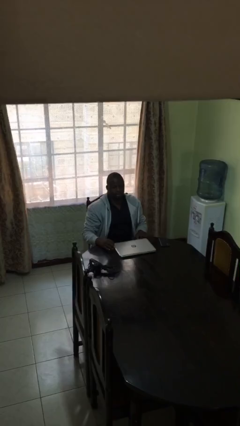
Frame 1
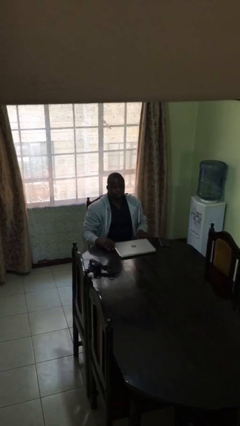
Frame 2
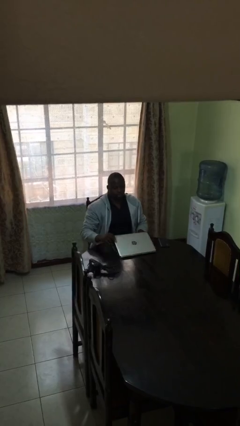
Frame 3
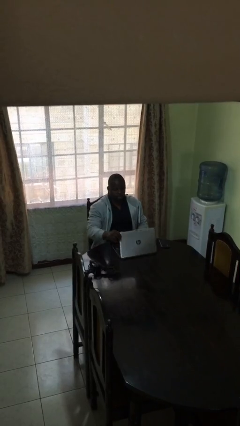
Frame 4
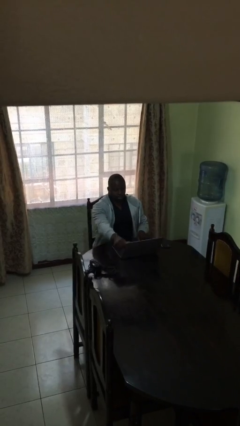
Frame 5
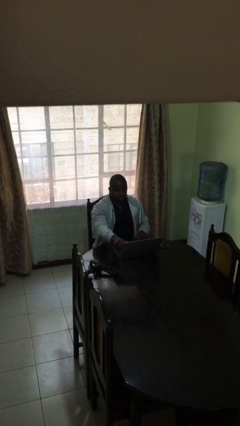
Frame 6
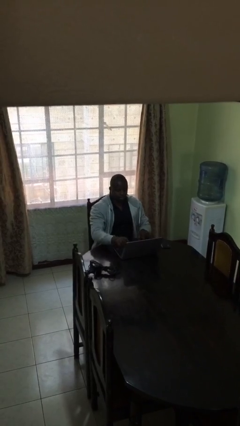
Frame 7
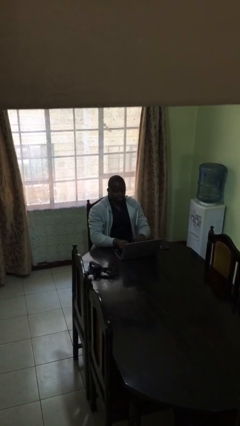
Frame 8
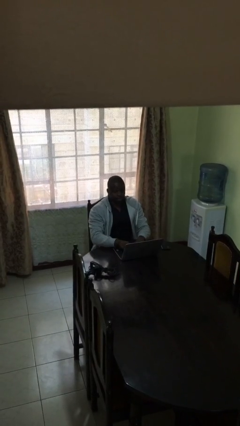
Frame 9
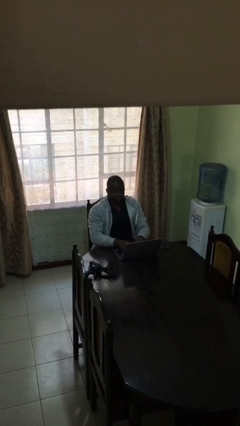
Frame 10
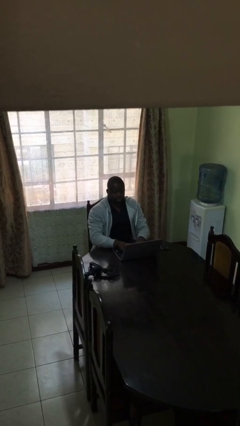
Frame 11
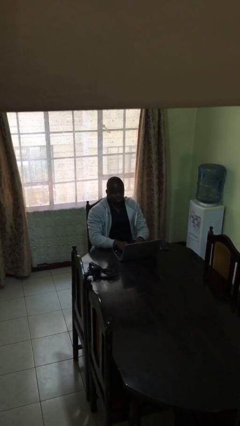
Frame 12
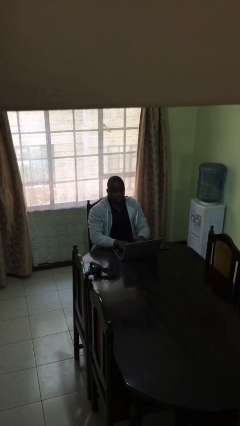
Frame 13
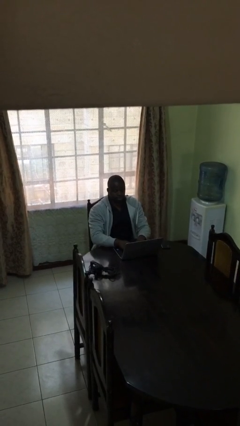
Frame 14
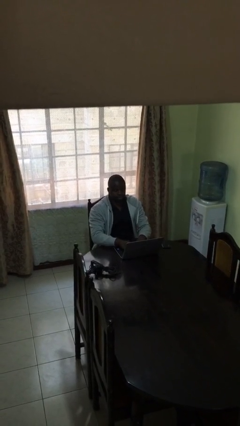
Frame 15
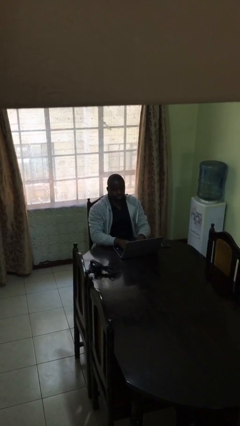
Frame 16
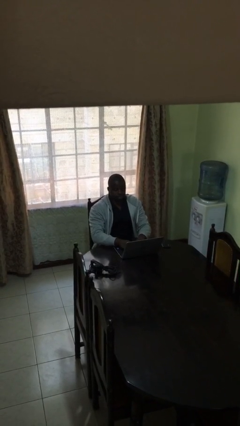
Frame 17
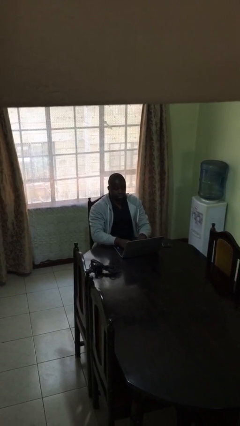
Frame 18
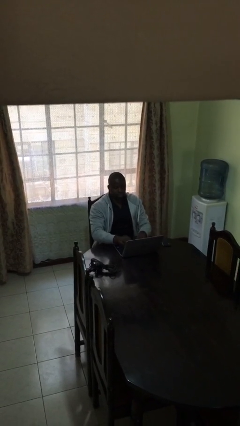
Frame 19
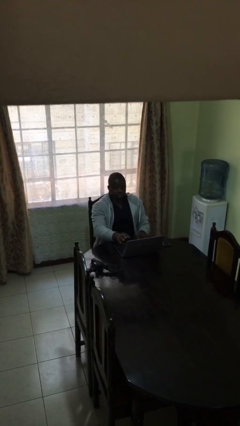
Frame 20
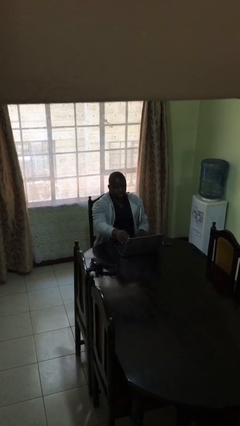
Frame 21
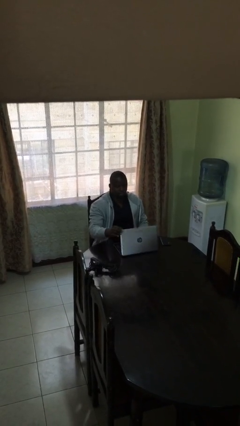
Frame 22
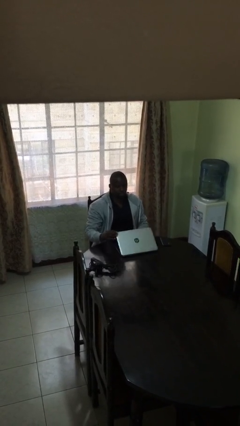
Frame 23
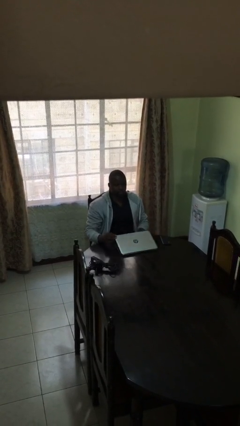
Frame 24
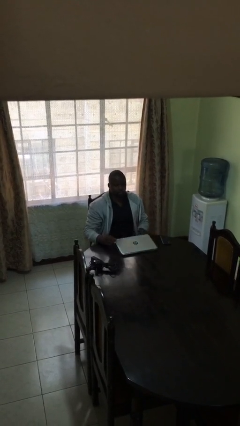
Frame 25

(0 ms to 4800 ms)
person interacts with laptop

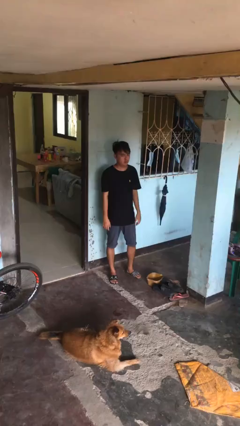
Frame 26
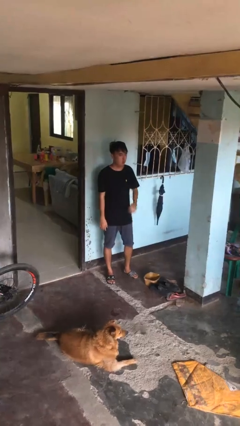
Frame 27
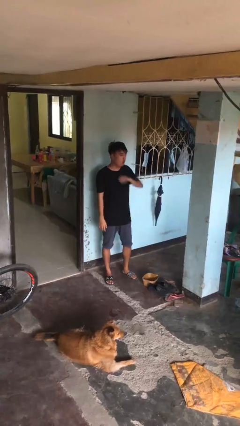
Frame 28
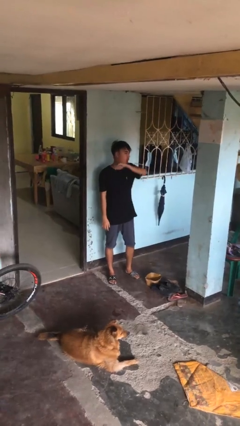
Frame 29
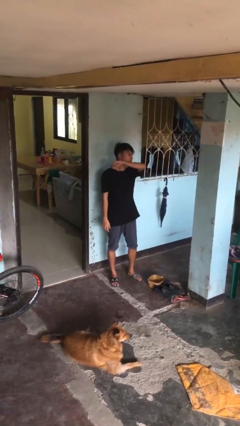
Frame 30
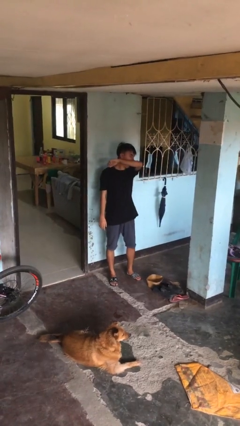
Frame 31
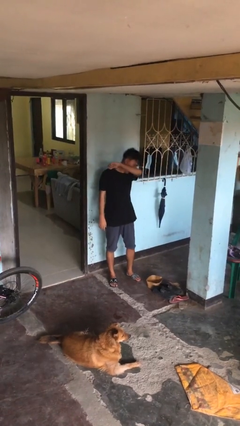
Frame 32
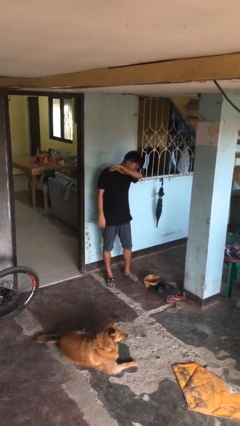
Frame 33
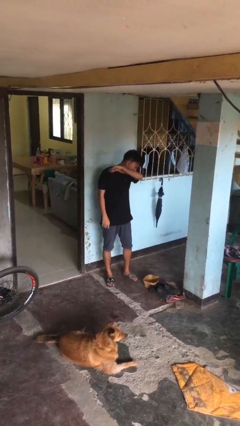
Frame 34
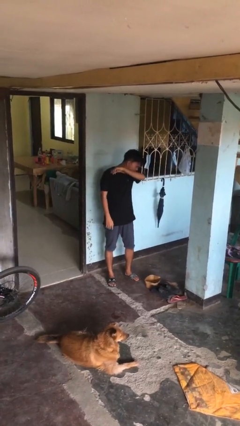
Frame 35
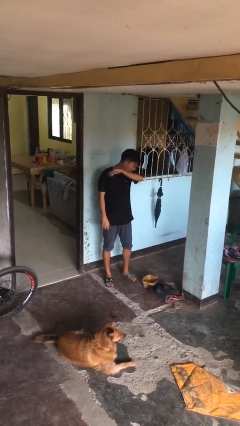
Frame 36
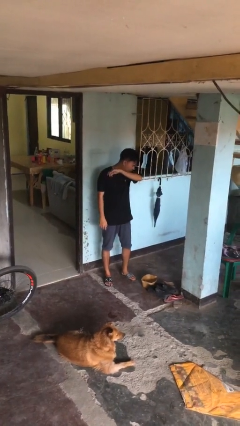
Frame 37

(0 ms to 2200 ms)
person sneezes into arm

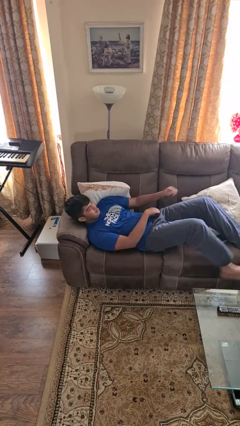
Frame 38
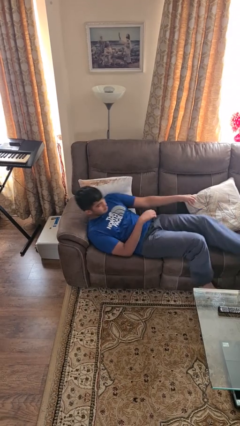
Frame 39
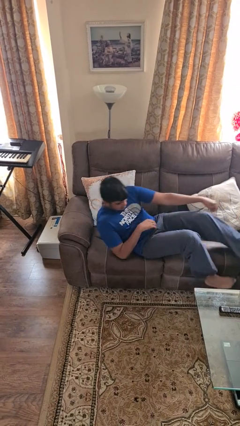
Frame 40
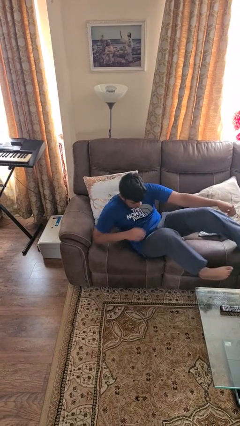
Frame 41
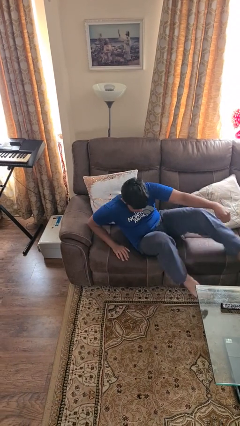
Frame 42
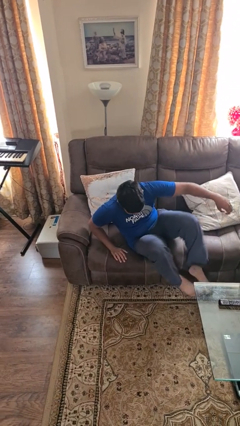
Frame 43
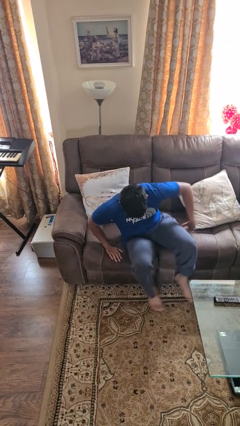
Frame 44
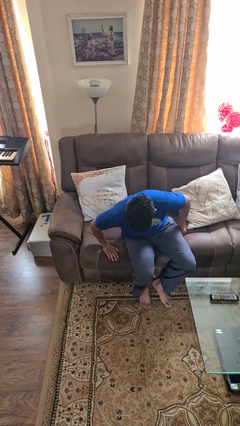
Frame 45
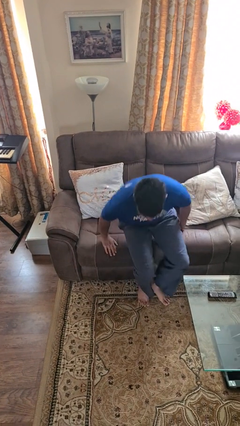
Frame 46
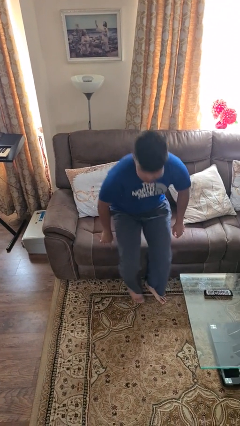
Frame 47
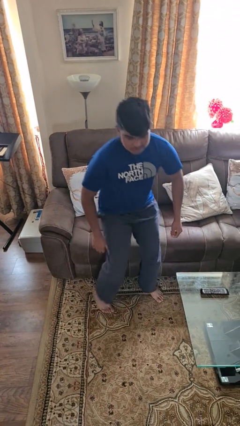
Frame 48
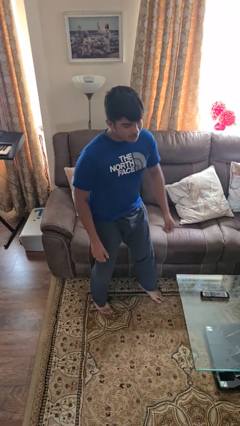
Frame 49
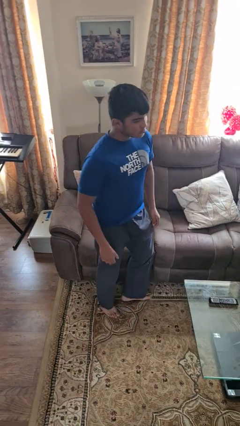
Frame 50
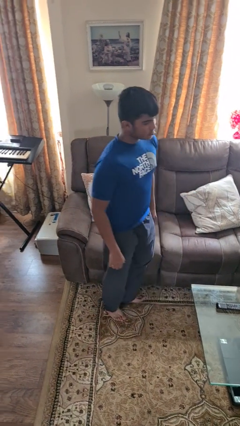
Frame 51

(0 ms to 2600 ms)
person stands up

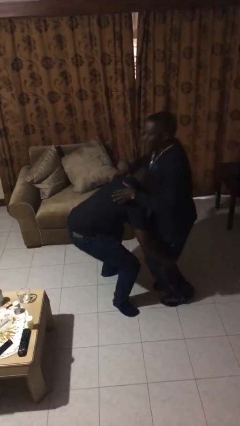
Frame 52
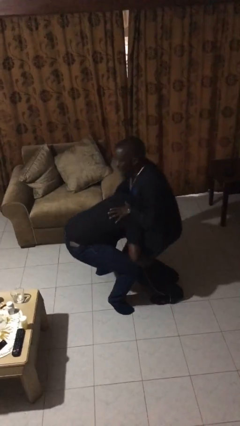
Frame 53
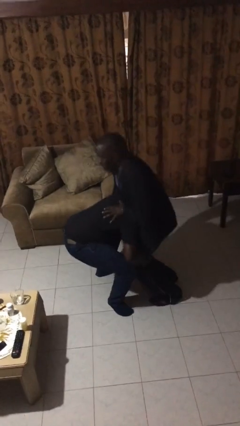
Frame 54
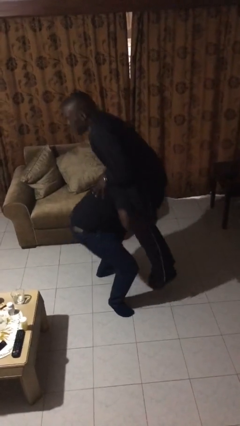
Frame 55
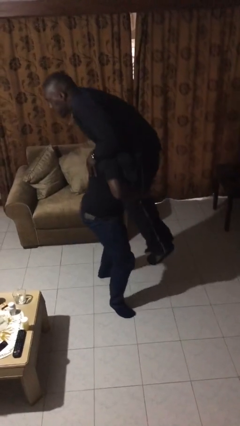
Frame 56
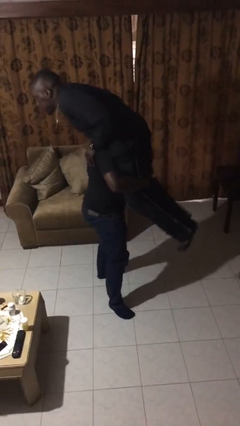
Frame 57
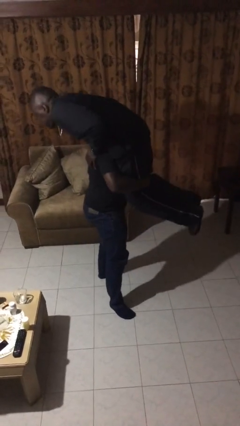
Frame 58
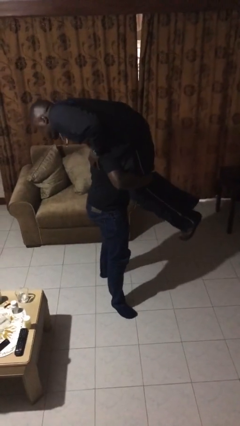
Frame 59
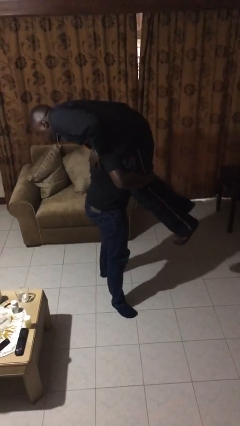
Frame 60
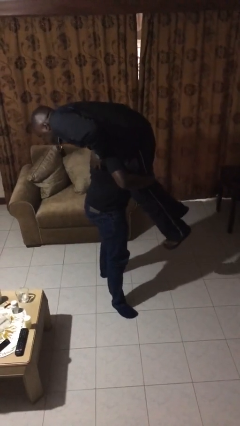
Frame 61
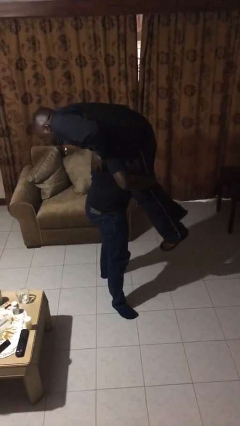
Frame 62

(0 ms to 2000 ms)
person carries person over shoulder

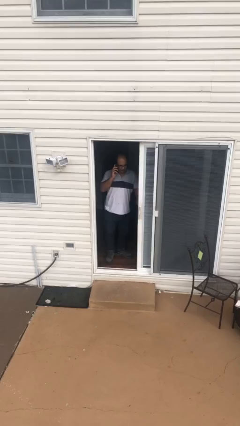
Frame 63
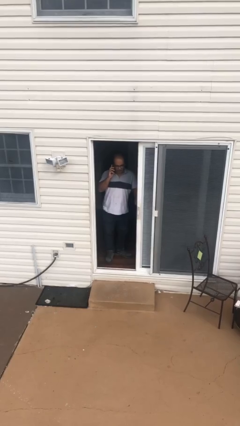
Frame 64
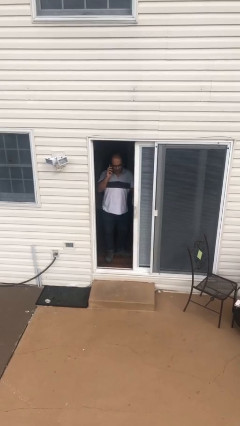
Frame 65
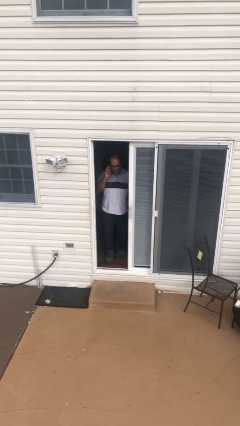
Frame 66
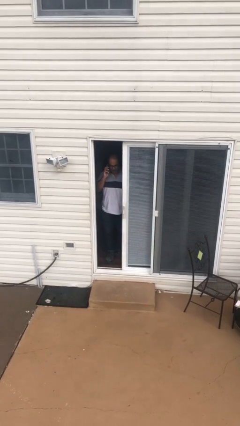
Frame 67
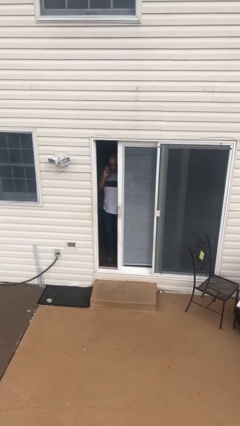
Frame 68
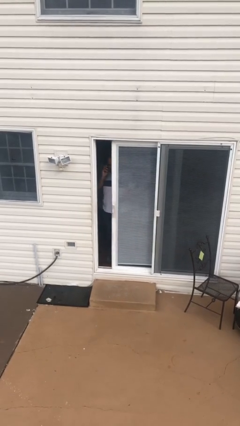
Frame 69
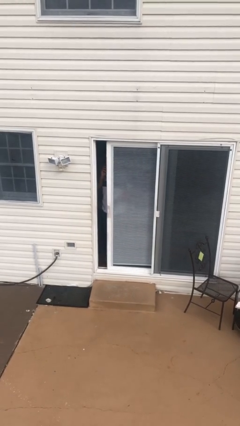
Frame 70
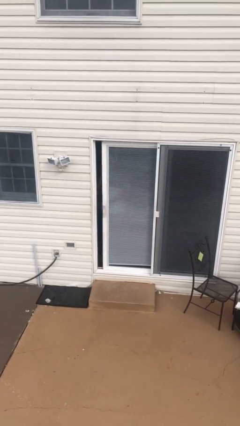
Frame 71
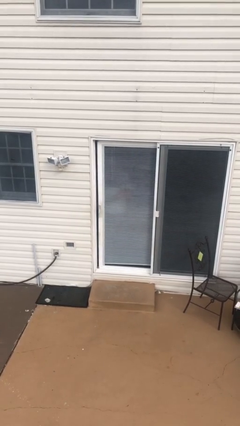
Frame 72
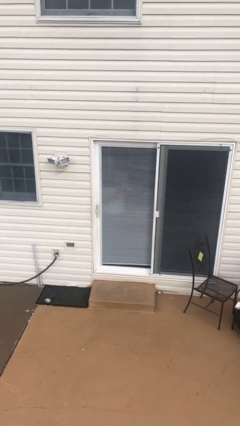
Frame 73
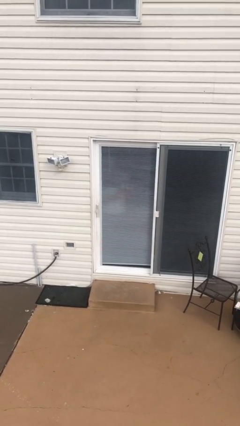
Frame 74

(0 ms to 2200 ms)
person closes facility door

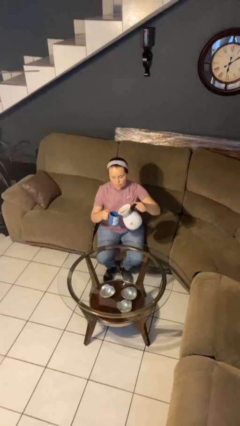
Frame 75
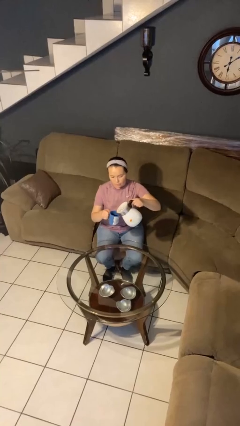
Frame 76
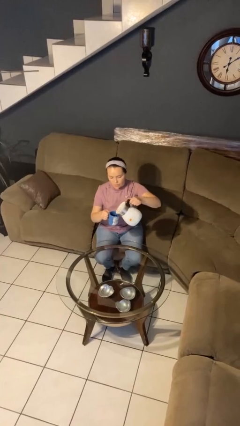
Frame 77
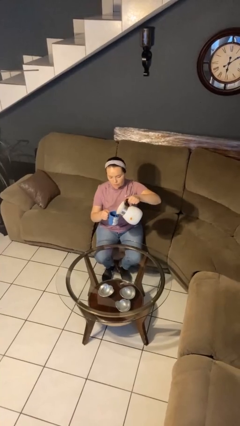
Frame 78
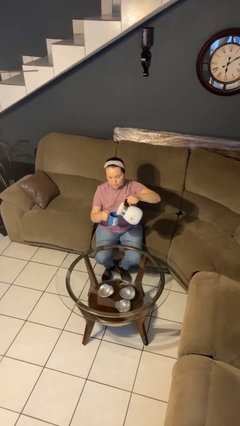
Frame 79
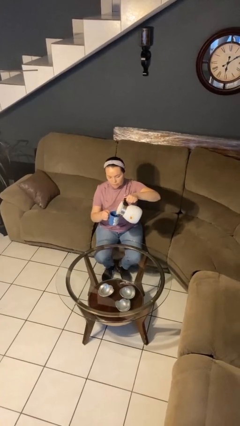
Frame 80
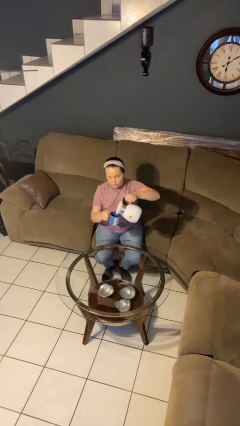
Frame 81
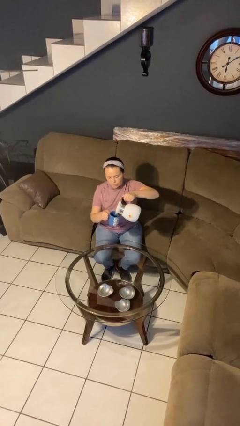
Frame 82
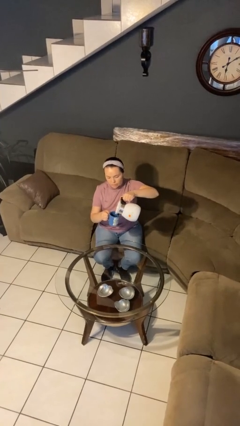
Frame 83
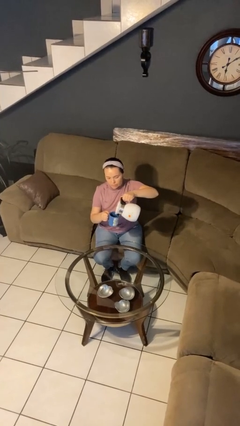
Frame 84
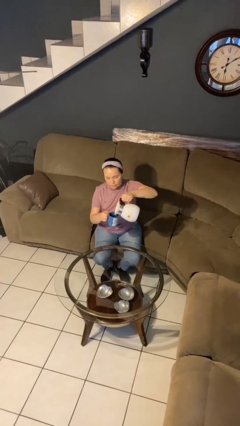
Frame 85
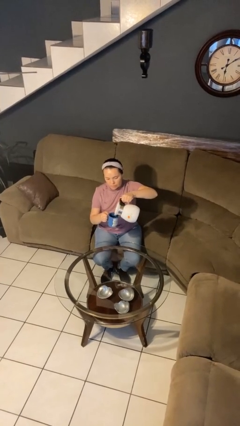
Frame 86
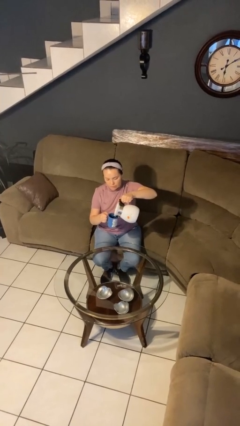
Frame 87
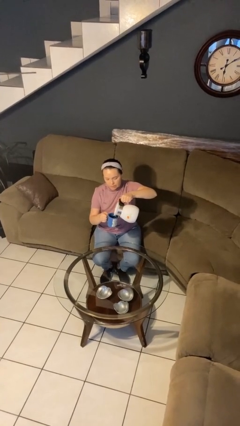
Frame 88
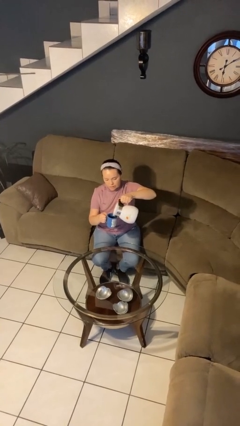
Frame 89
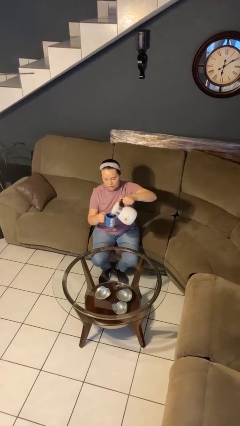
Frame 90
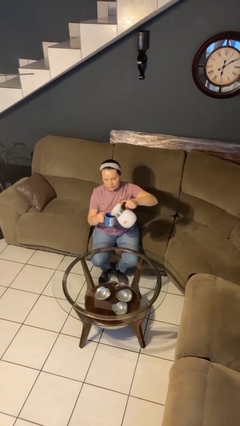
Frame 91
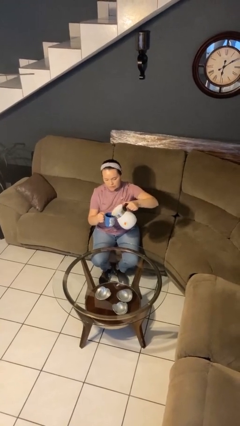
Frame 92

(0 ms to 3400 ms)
person pours coffee into mug

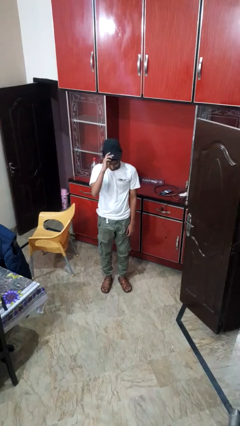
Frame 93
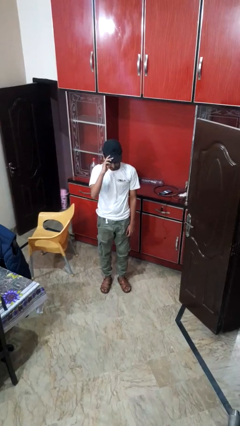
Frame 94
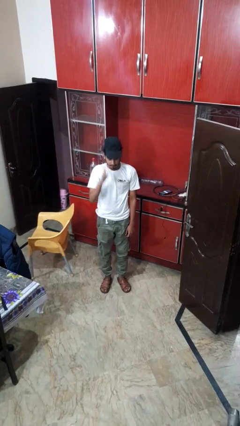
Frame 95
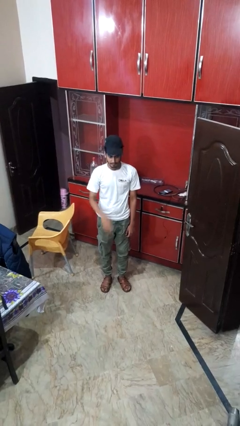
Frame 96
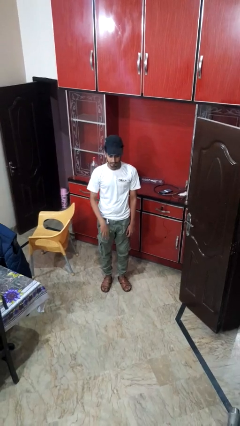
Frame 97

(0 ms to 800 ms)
person puts on hat
